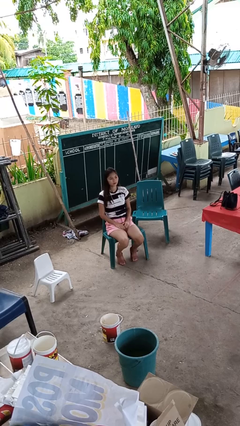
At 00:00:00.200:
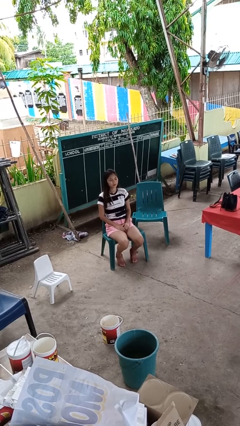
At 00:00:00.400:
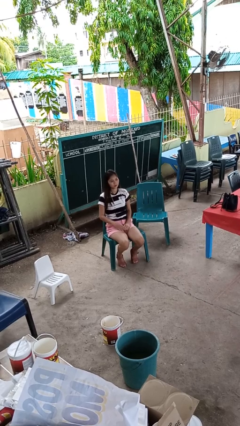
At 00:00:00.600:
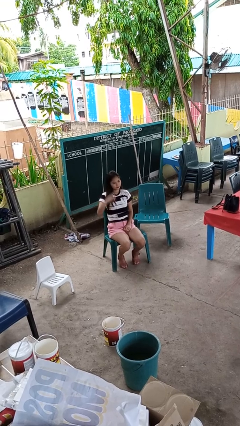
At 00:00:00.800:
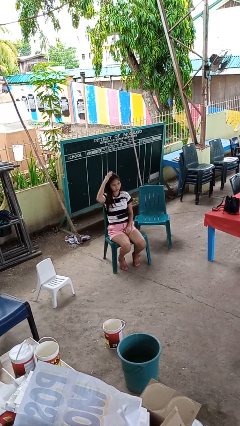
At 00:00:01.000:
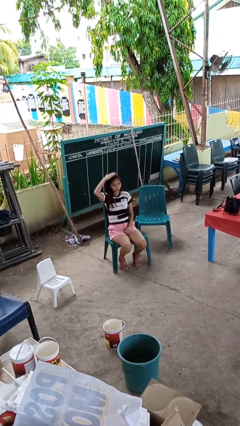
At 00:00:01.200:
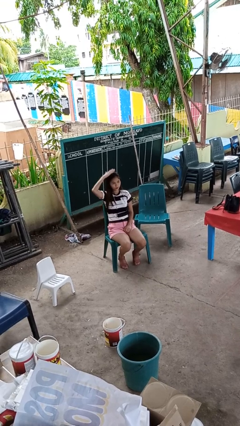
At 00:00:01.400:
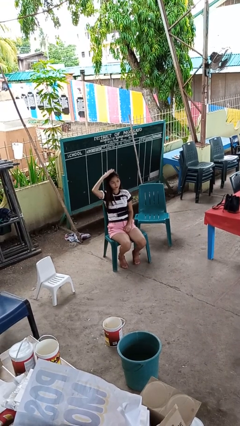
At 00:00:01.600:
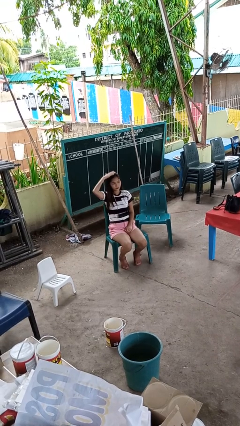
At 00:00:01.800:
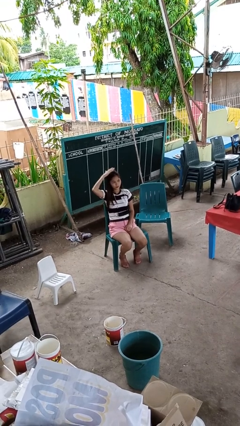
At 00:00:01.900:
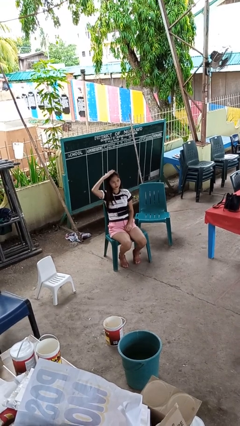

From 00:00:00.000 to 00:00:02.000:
person pats head

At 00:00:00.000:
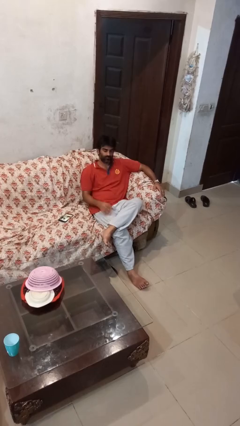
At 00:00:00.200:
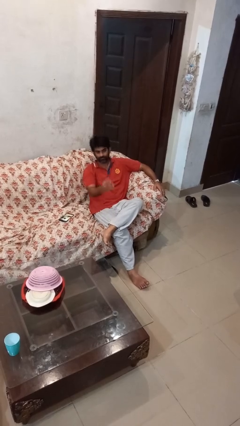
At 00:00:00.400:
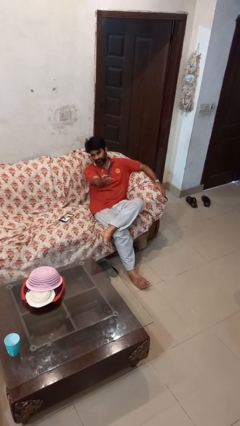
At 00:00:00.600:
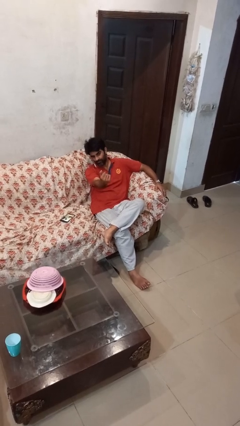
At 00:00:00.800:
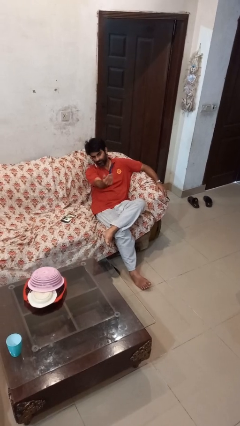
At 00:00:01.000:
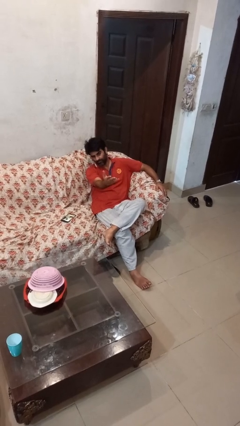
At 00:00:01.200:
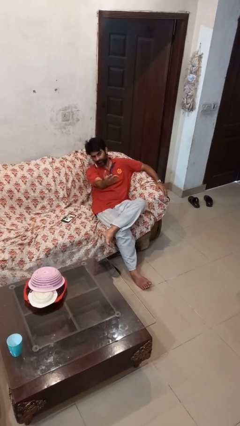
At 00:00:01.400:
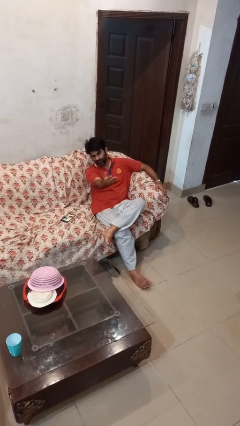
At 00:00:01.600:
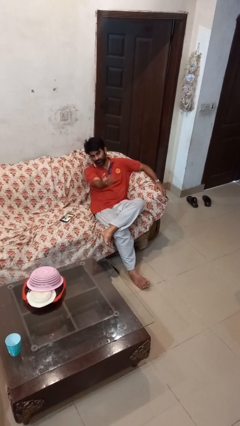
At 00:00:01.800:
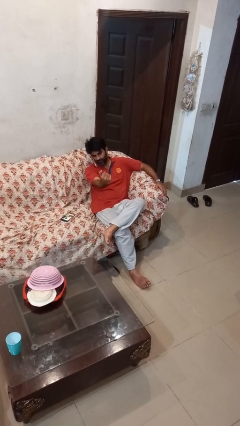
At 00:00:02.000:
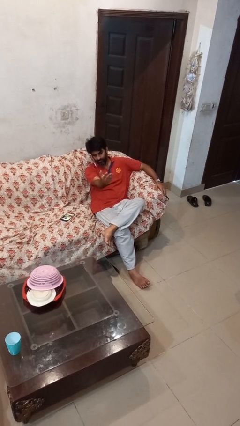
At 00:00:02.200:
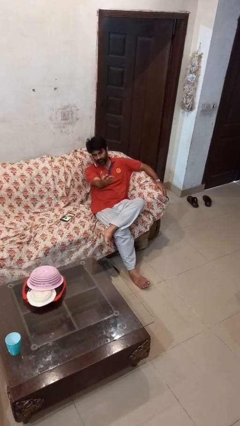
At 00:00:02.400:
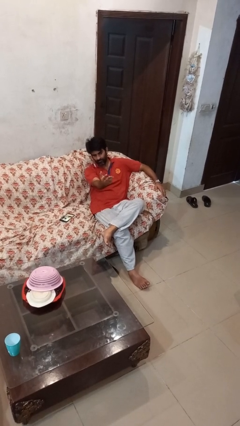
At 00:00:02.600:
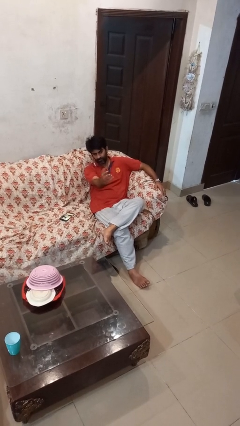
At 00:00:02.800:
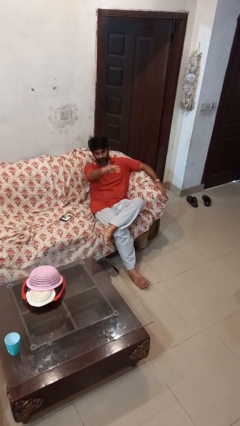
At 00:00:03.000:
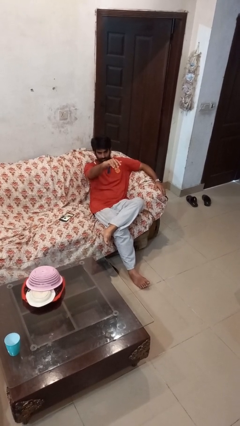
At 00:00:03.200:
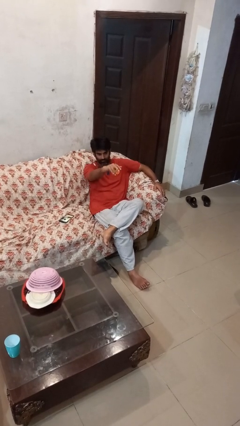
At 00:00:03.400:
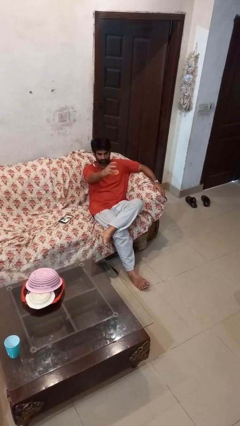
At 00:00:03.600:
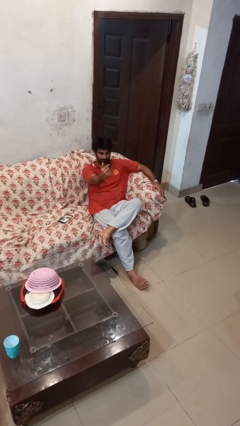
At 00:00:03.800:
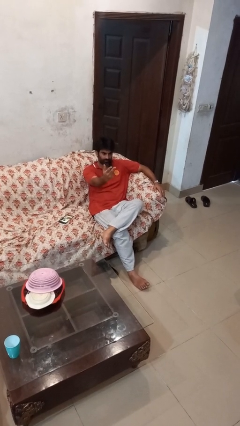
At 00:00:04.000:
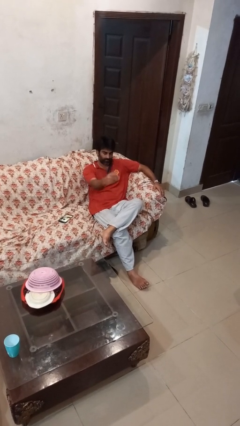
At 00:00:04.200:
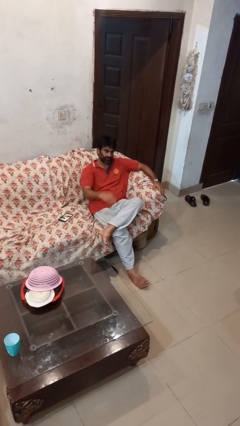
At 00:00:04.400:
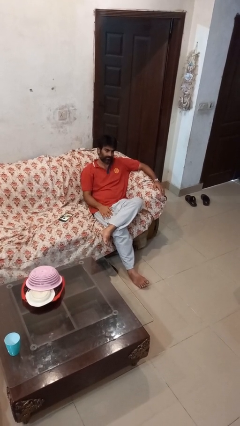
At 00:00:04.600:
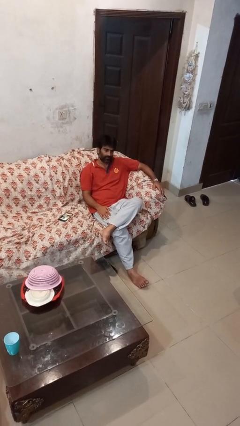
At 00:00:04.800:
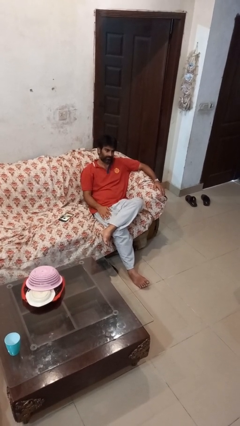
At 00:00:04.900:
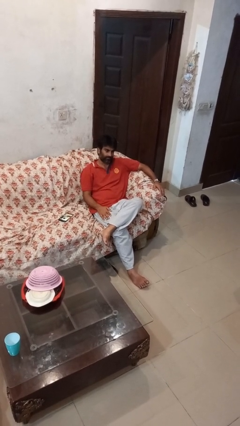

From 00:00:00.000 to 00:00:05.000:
person gestures come here

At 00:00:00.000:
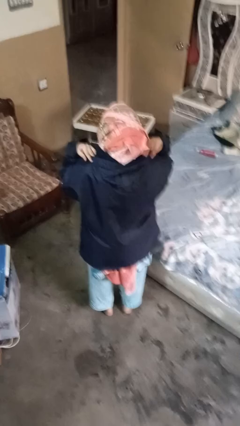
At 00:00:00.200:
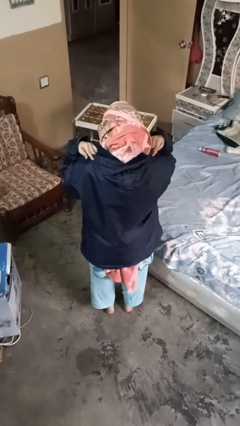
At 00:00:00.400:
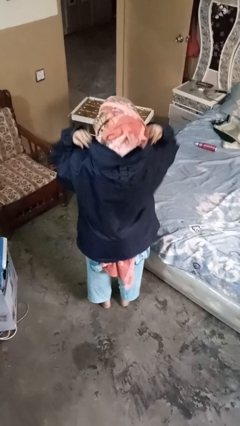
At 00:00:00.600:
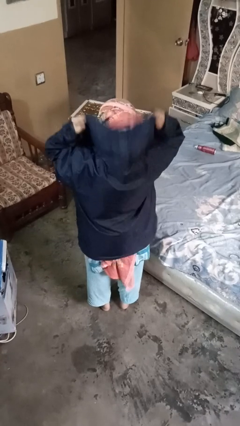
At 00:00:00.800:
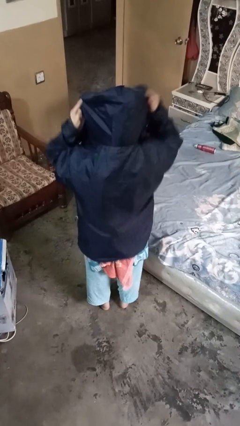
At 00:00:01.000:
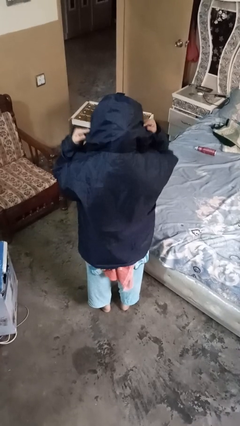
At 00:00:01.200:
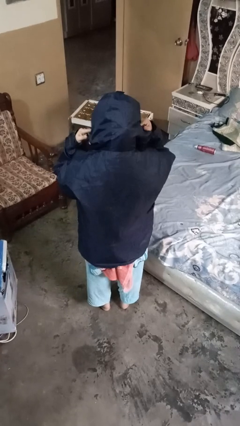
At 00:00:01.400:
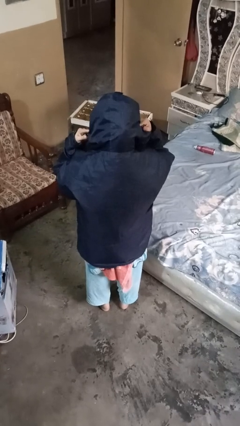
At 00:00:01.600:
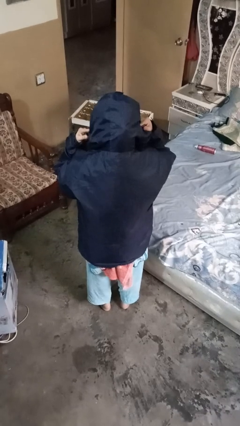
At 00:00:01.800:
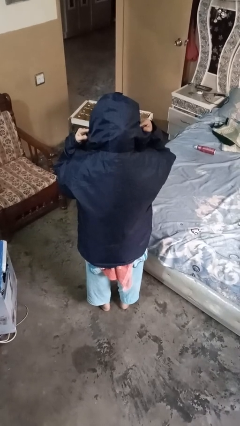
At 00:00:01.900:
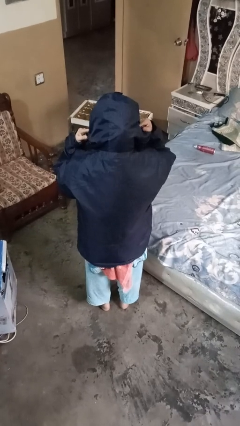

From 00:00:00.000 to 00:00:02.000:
person puts on hoodie

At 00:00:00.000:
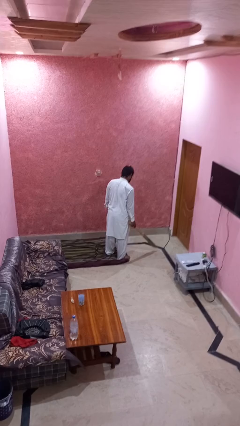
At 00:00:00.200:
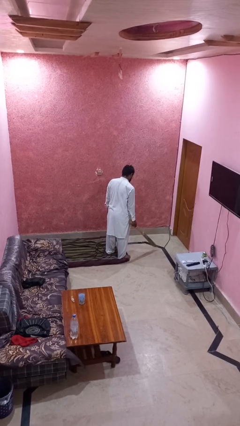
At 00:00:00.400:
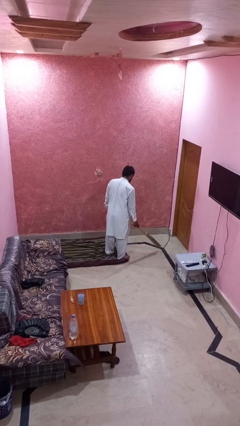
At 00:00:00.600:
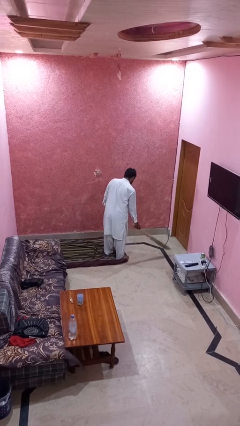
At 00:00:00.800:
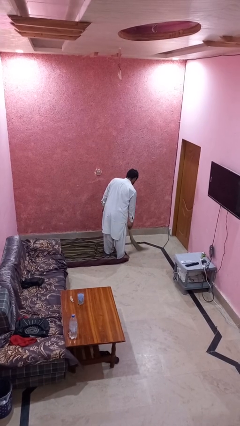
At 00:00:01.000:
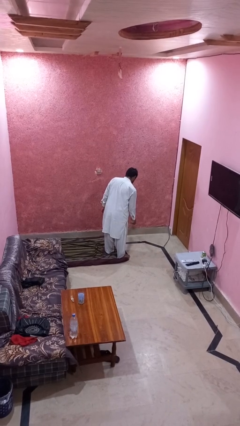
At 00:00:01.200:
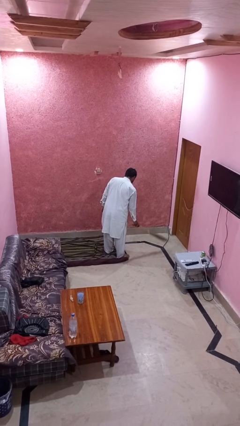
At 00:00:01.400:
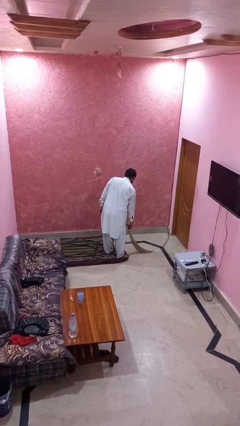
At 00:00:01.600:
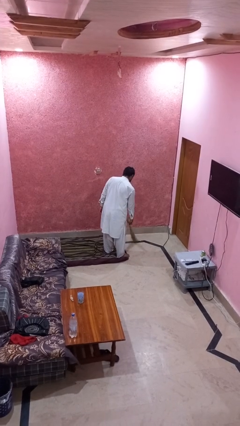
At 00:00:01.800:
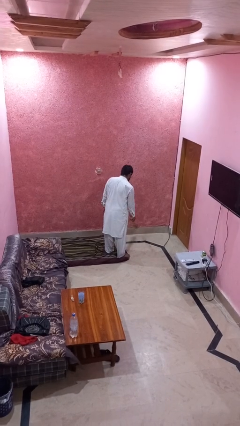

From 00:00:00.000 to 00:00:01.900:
person sweeps floor

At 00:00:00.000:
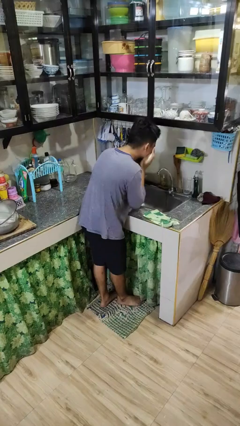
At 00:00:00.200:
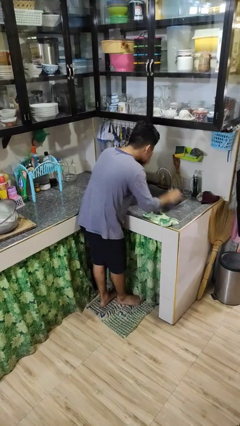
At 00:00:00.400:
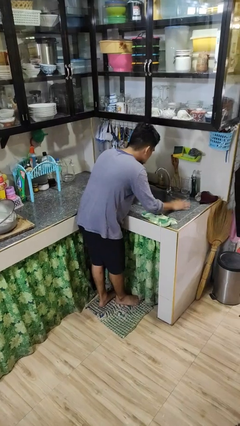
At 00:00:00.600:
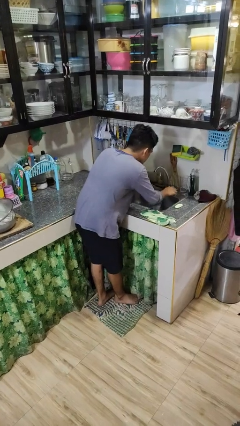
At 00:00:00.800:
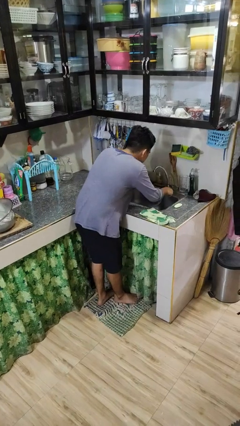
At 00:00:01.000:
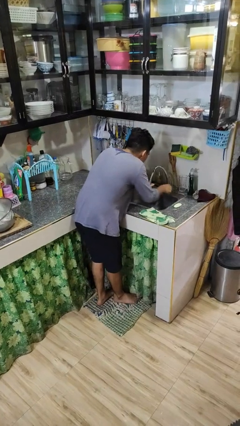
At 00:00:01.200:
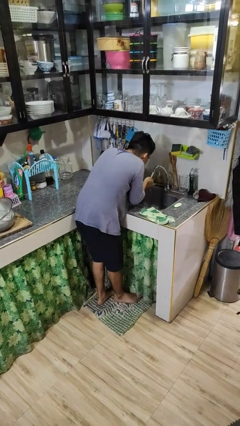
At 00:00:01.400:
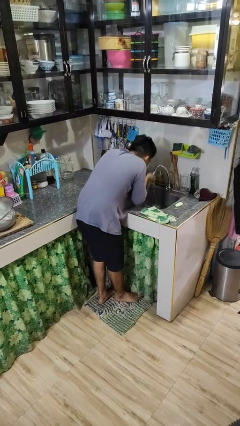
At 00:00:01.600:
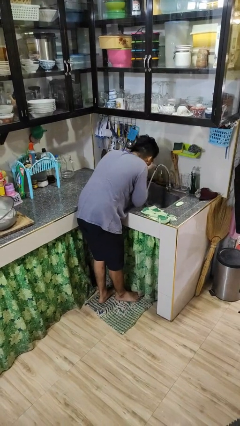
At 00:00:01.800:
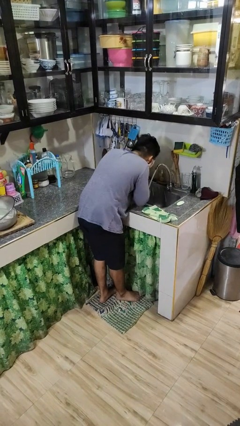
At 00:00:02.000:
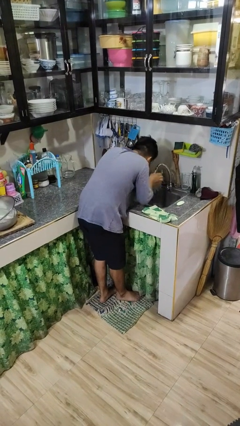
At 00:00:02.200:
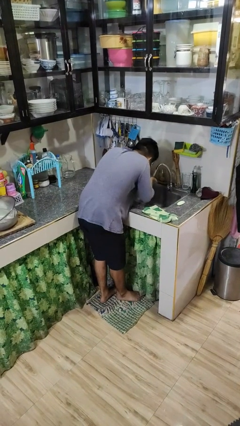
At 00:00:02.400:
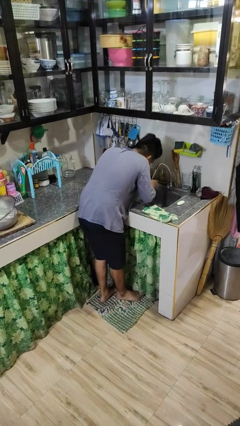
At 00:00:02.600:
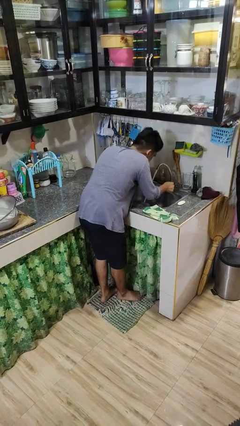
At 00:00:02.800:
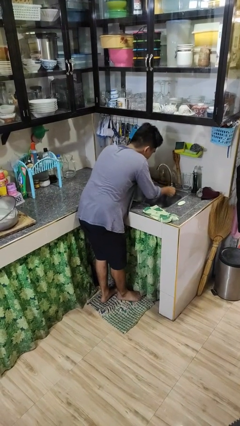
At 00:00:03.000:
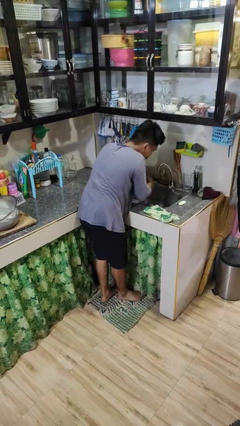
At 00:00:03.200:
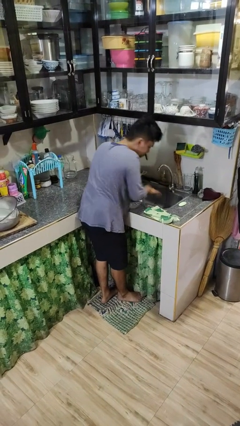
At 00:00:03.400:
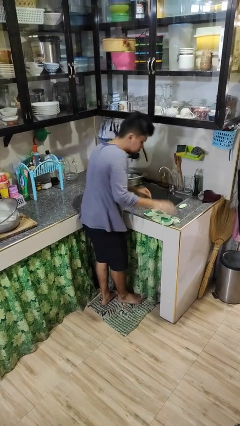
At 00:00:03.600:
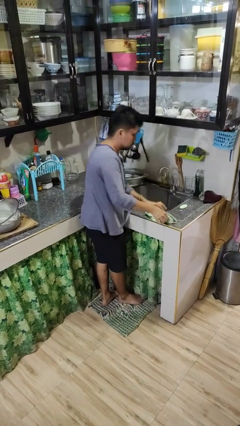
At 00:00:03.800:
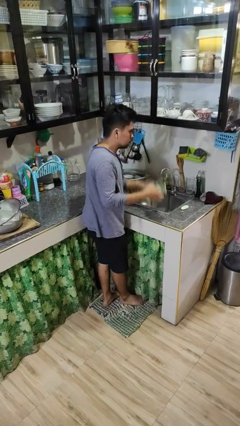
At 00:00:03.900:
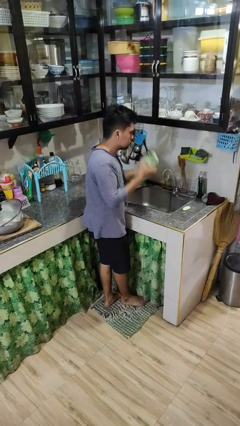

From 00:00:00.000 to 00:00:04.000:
person washes face

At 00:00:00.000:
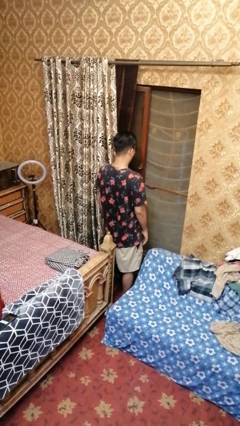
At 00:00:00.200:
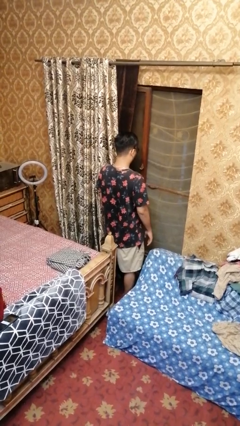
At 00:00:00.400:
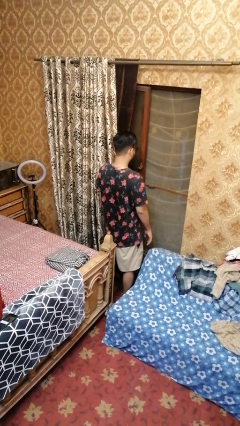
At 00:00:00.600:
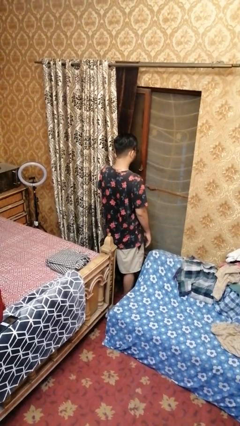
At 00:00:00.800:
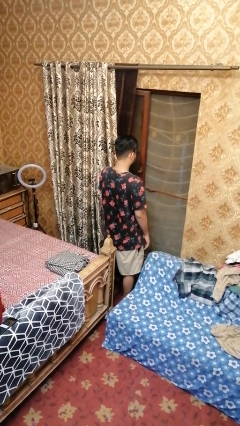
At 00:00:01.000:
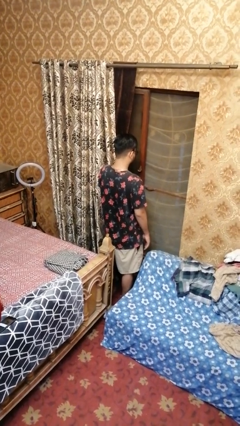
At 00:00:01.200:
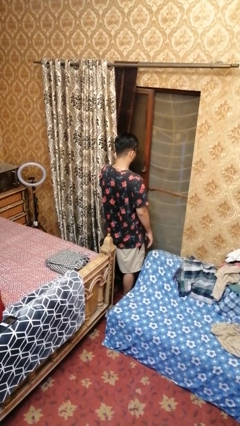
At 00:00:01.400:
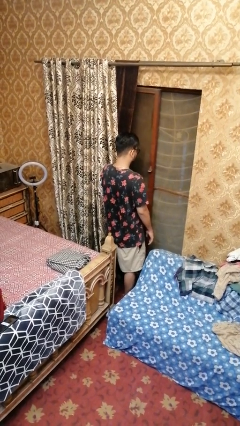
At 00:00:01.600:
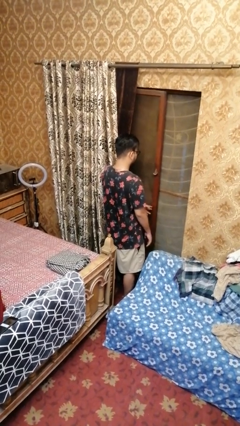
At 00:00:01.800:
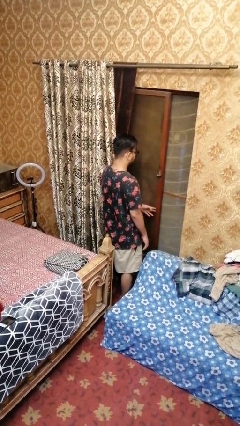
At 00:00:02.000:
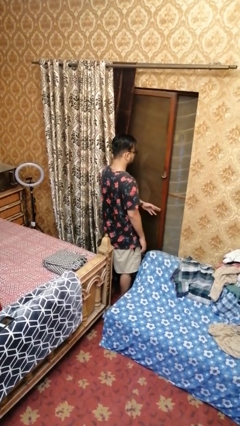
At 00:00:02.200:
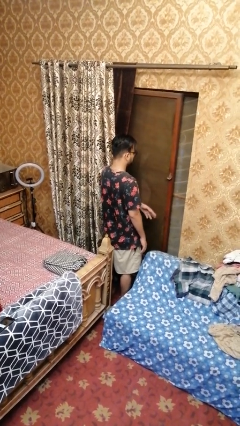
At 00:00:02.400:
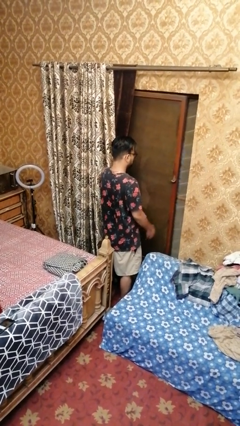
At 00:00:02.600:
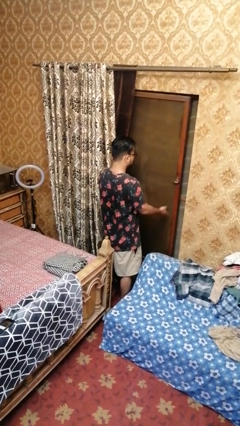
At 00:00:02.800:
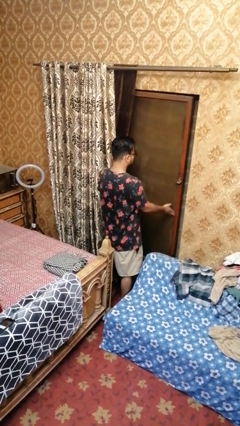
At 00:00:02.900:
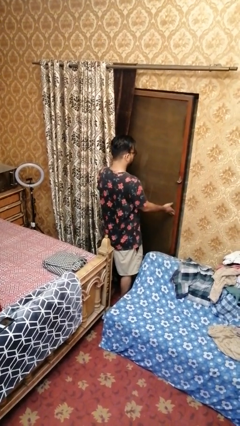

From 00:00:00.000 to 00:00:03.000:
person closes home window
